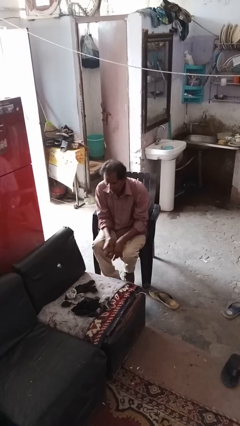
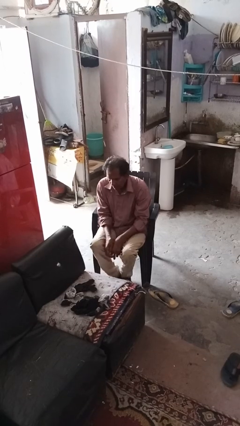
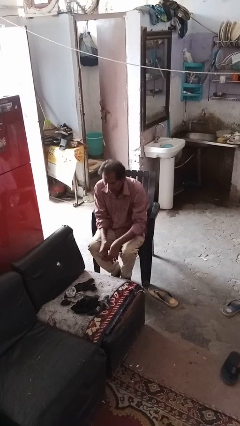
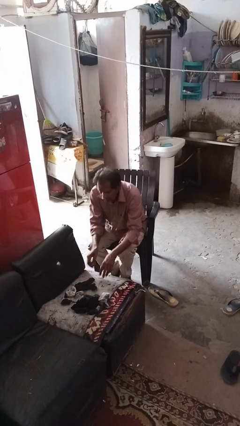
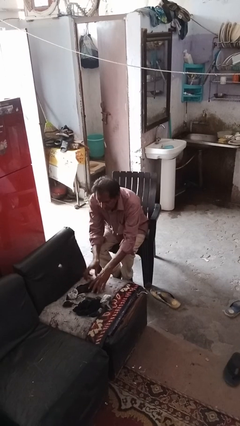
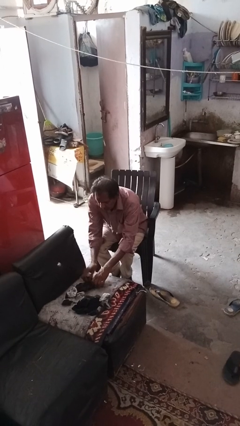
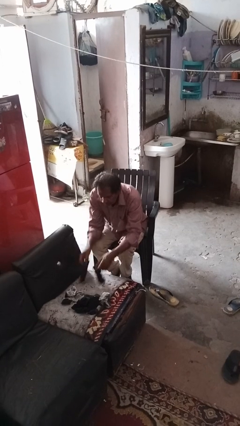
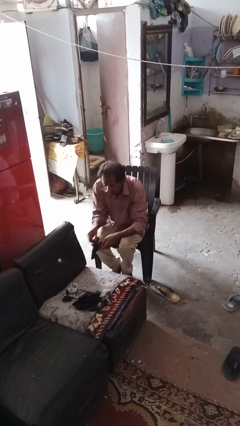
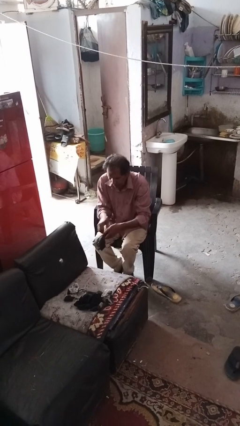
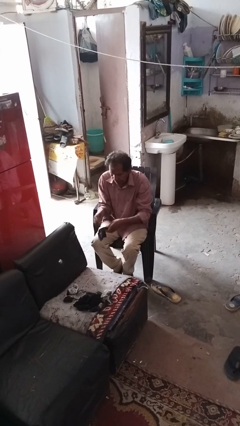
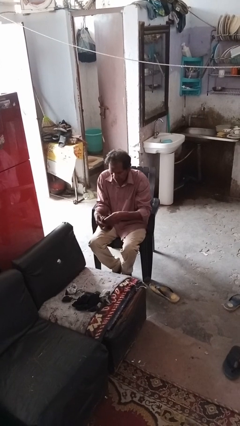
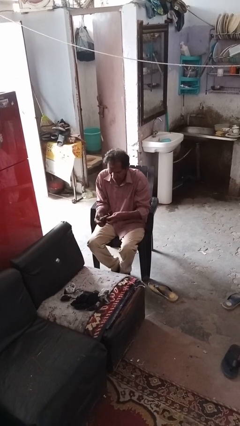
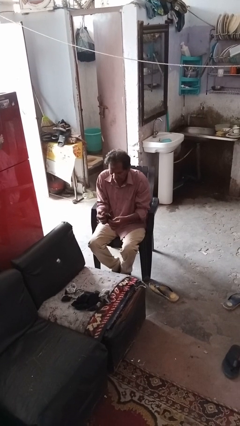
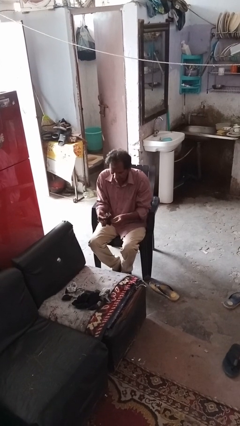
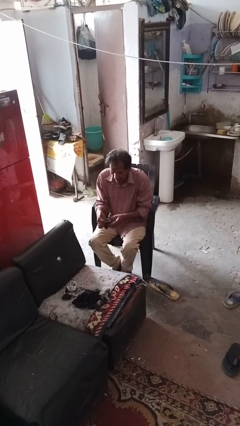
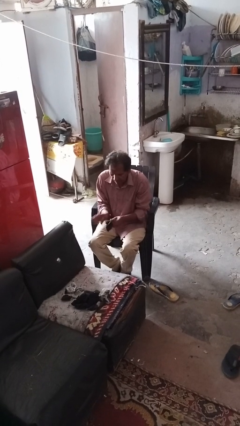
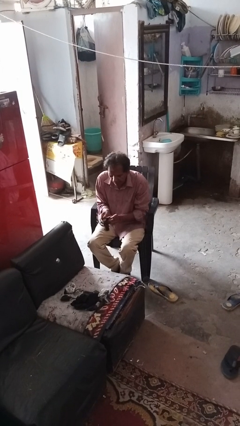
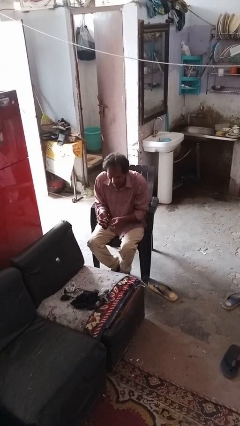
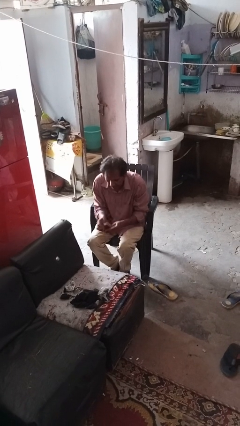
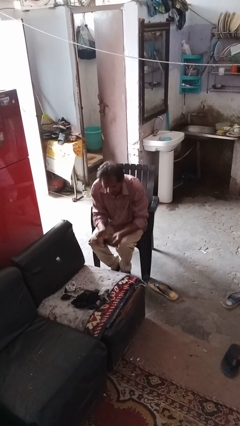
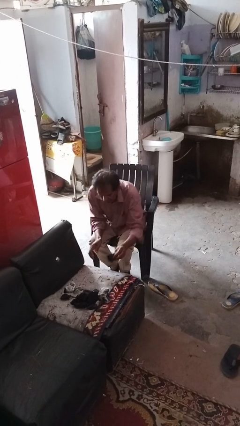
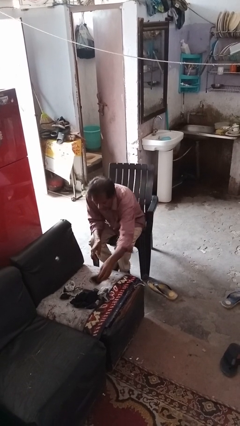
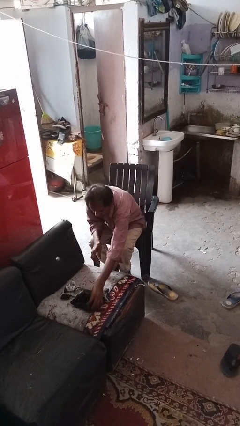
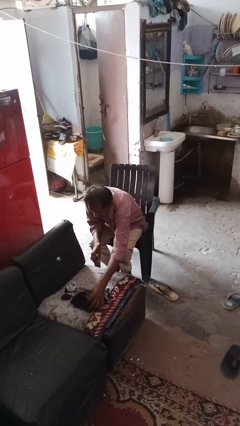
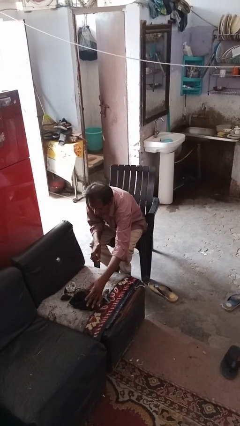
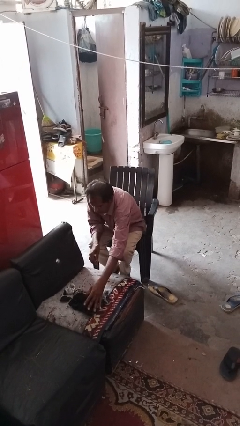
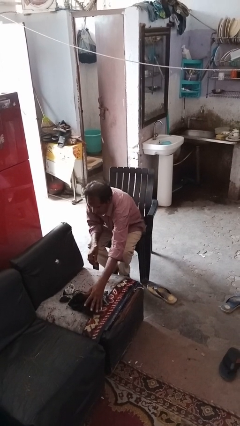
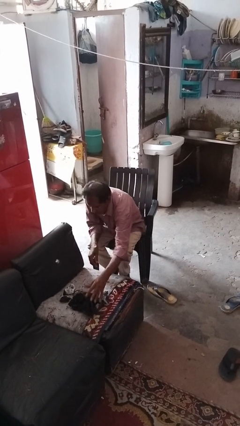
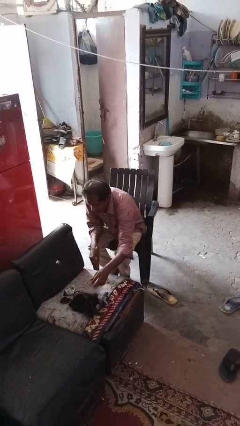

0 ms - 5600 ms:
person folds socks

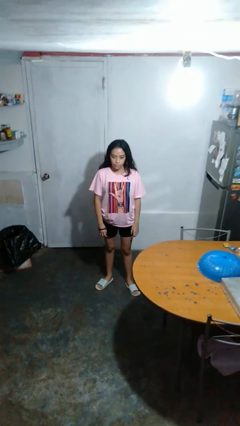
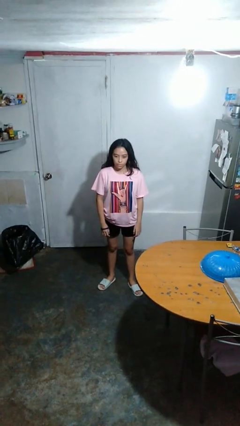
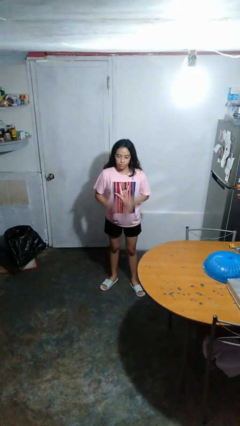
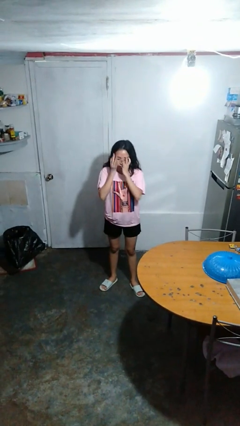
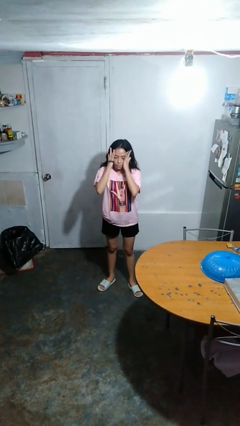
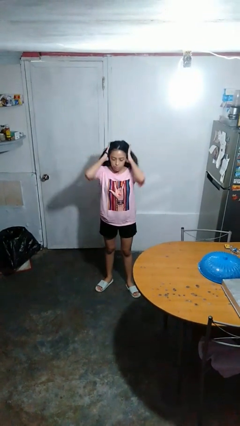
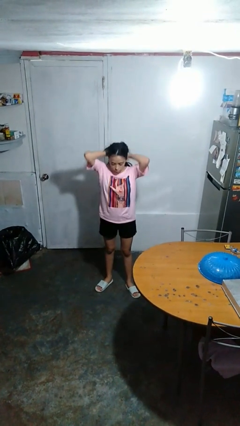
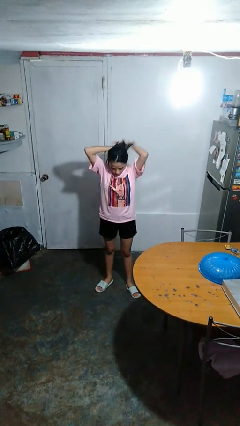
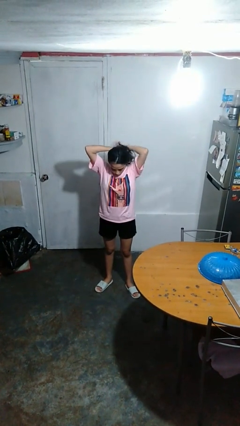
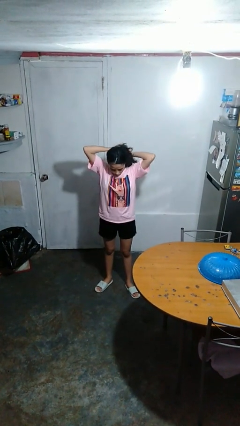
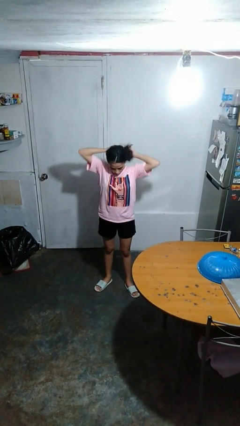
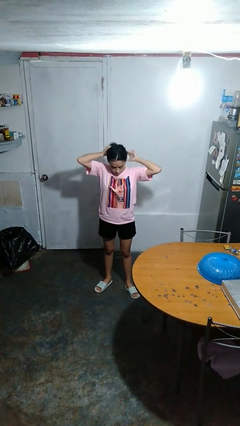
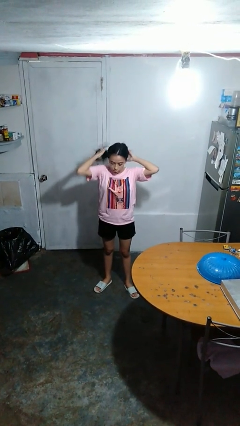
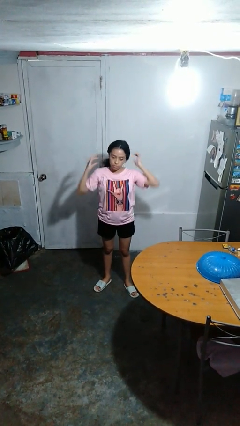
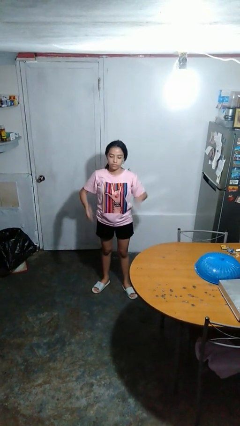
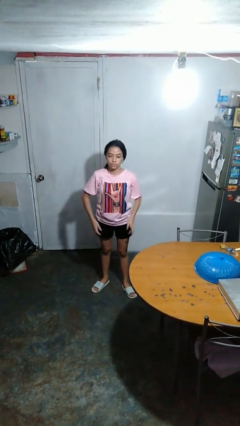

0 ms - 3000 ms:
person puts hair in ponytail

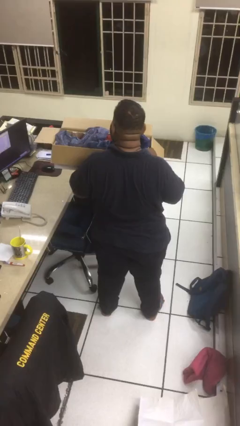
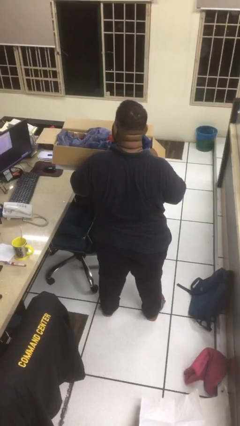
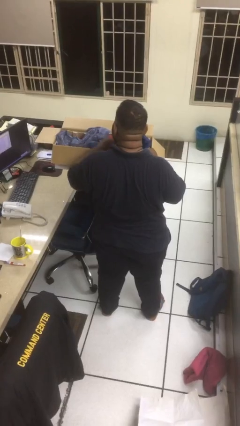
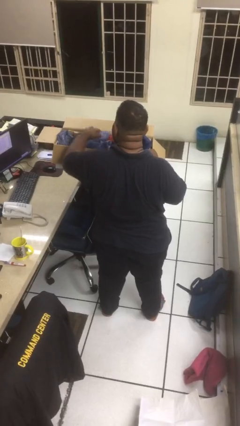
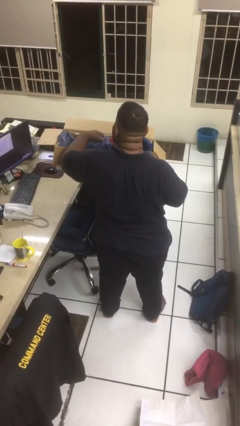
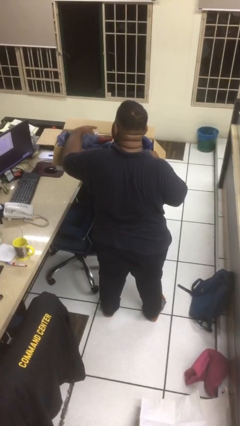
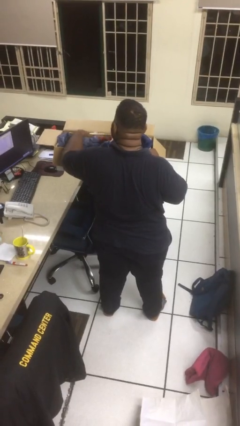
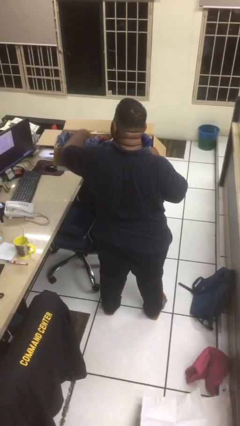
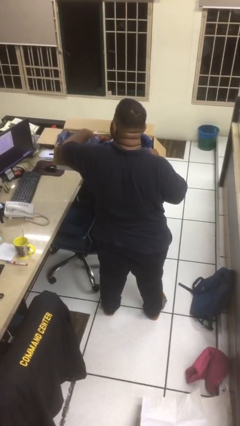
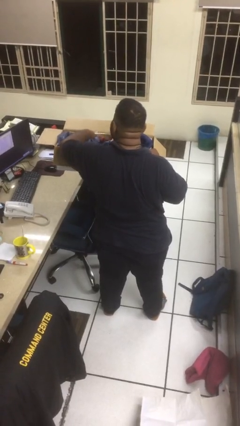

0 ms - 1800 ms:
person searches in box

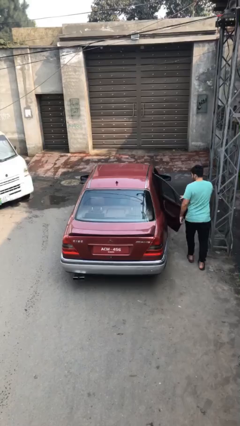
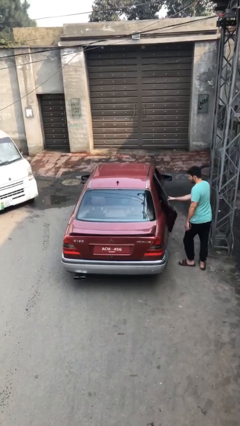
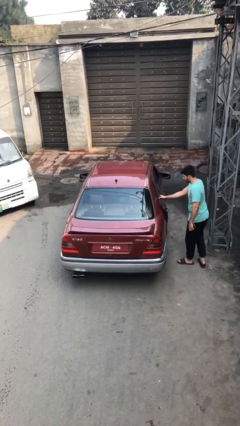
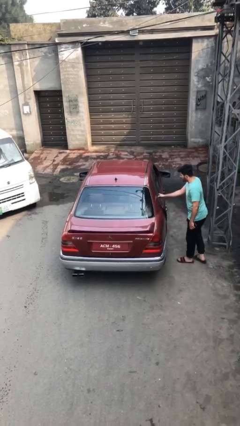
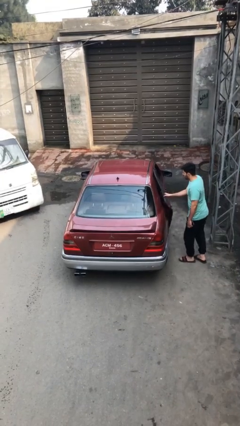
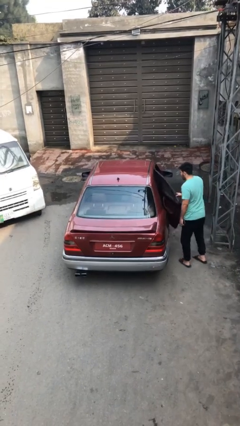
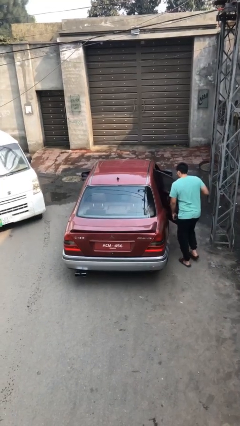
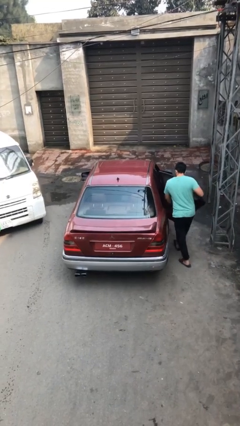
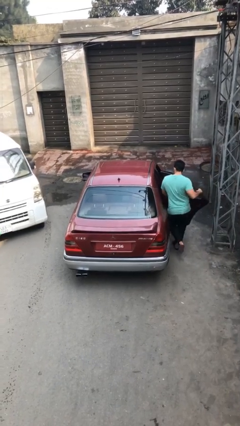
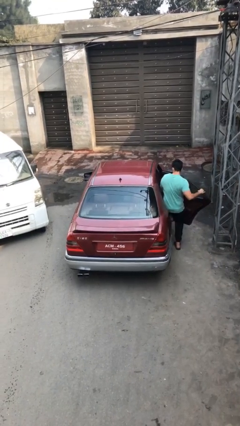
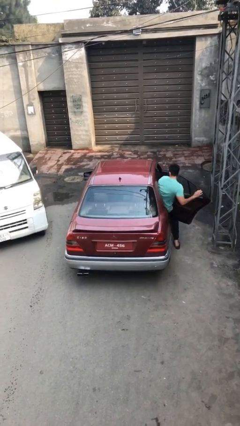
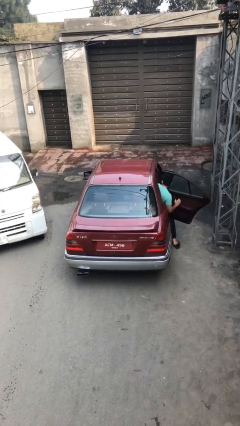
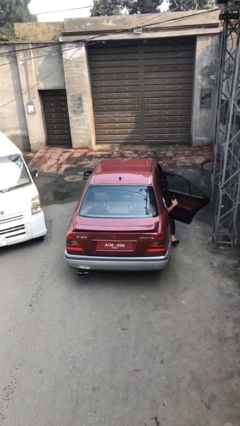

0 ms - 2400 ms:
car picks up person

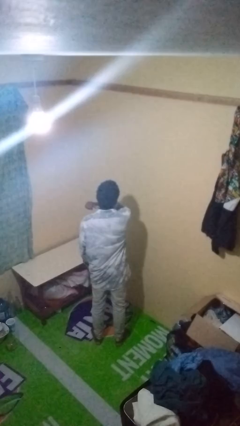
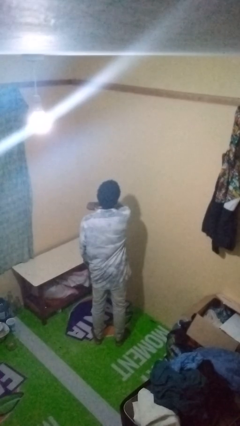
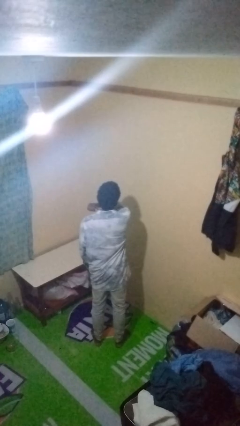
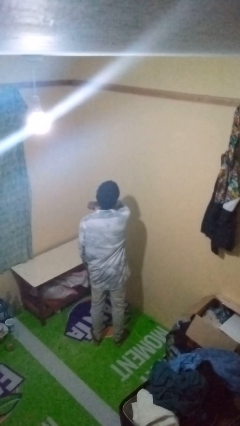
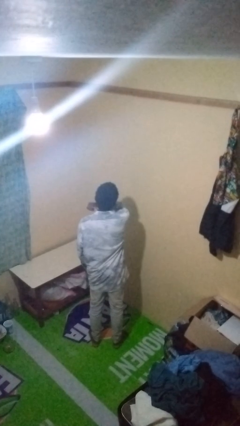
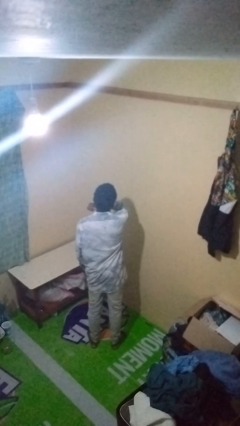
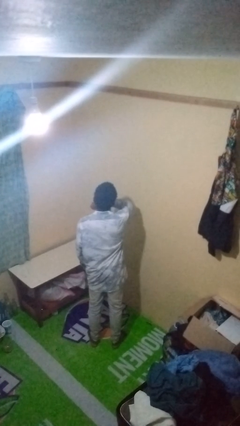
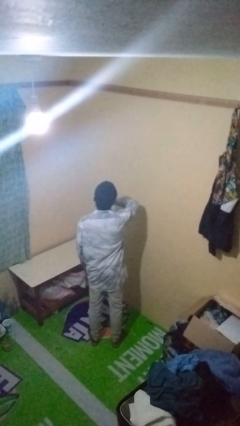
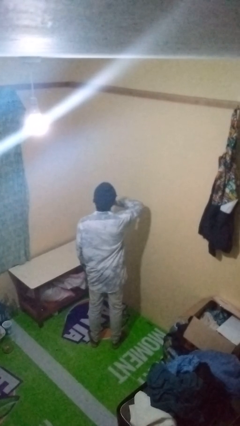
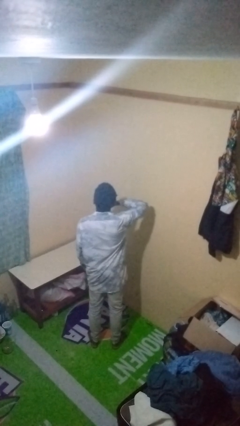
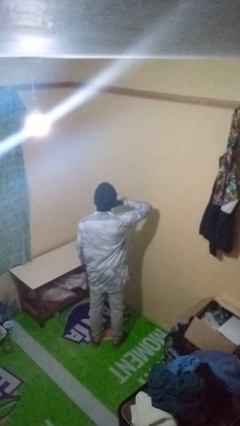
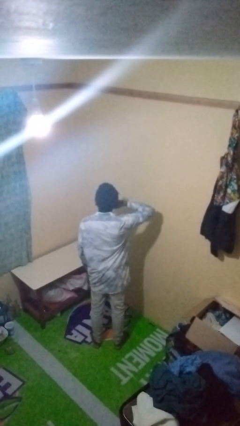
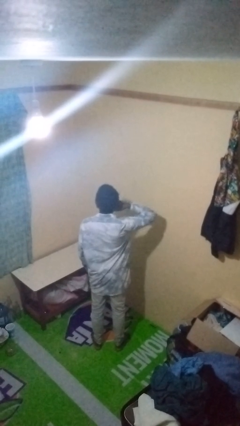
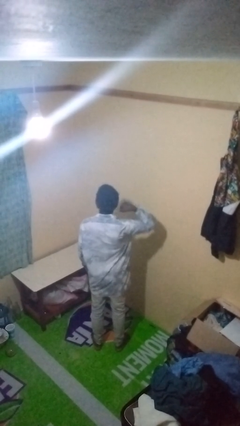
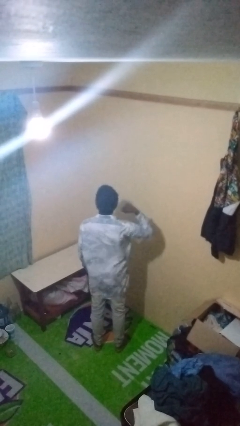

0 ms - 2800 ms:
person gestures cut

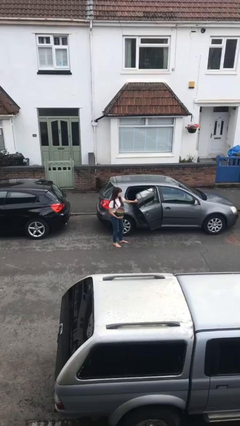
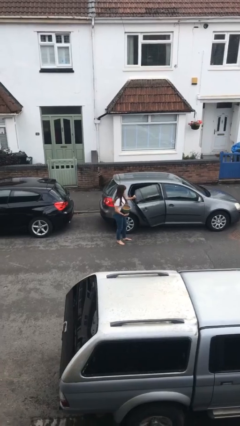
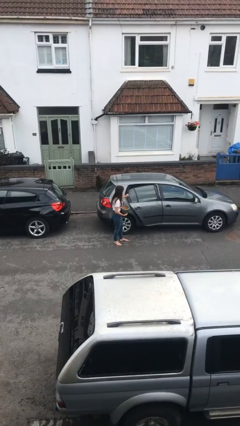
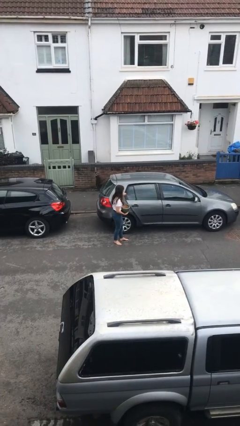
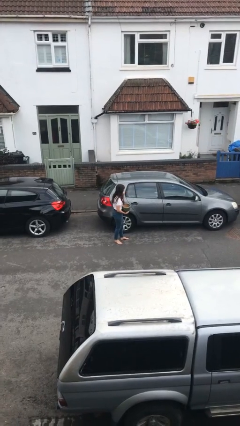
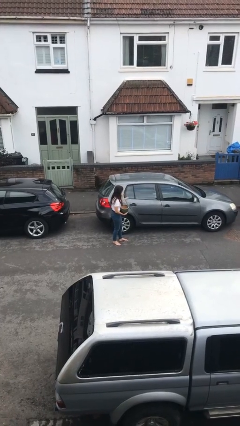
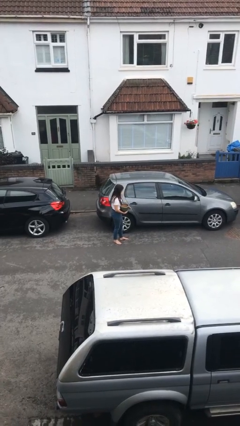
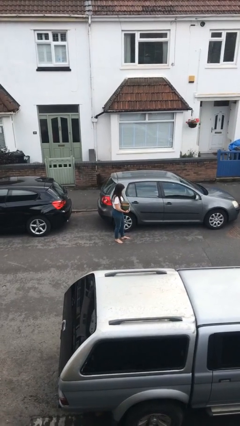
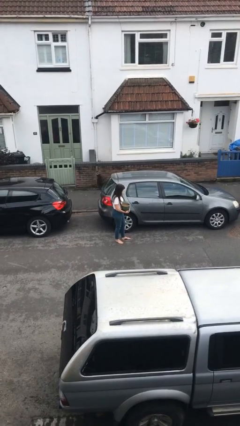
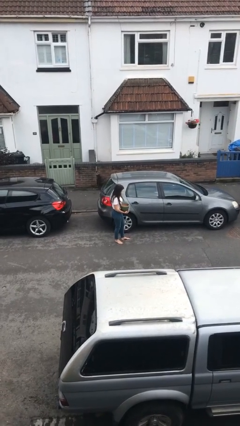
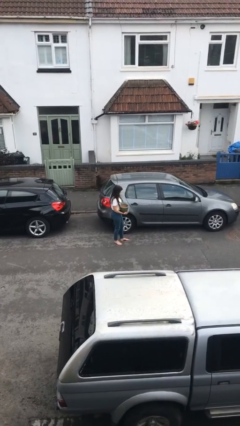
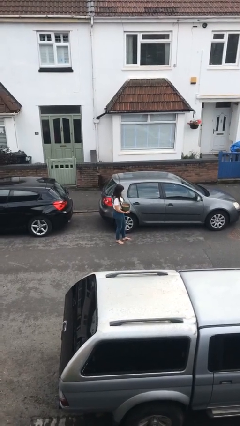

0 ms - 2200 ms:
person closes car door
